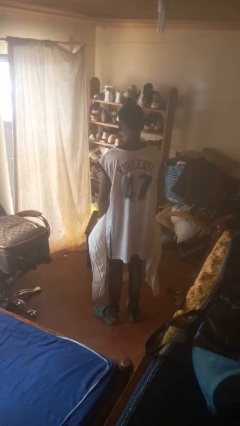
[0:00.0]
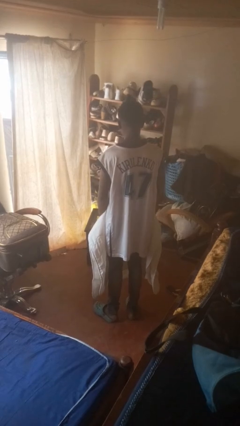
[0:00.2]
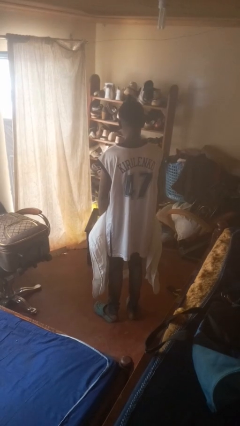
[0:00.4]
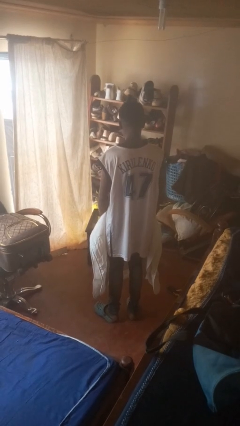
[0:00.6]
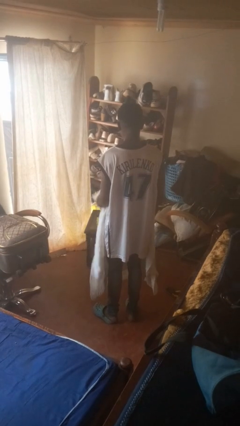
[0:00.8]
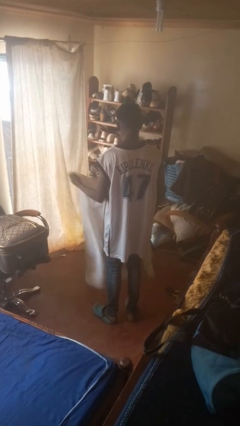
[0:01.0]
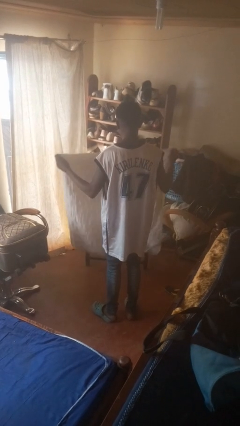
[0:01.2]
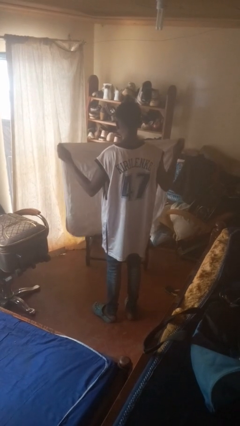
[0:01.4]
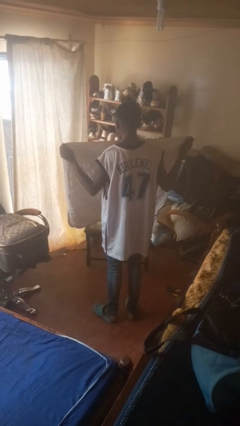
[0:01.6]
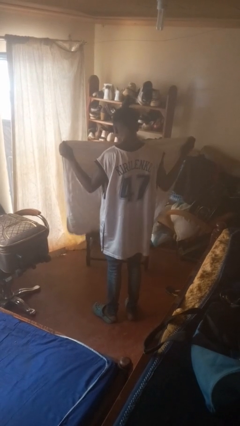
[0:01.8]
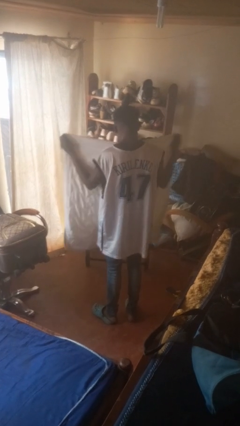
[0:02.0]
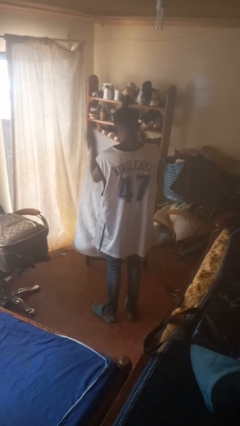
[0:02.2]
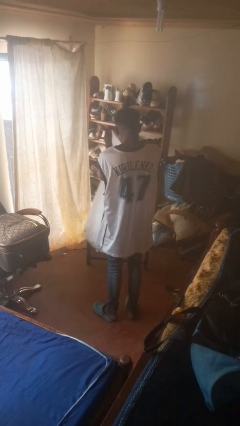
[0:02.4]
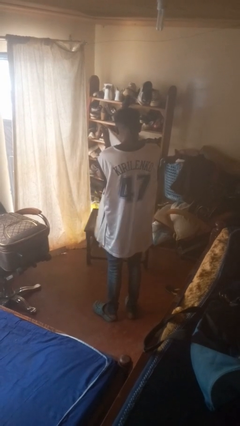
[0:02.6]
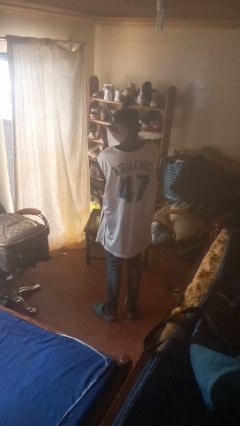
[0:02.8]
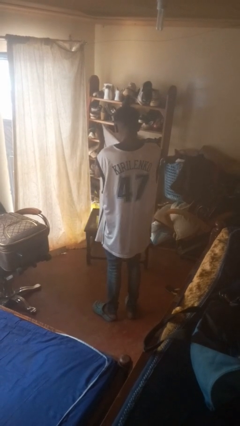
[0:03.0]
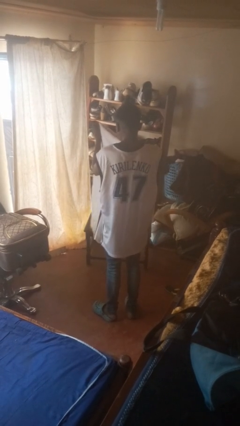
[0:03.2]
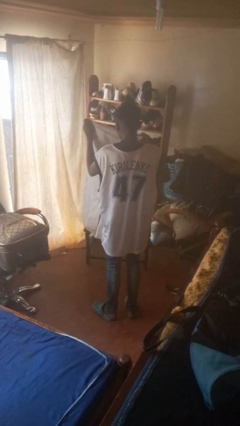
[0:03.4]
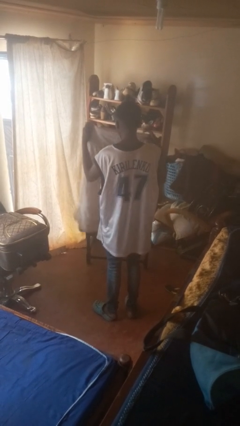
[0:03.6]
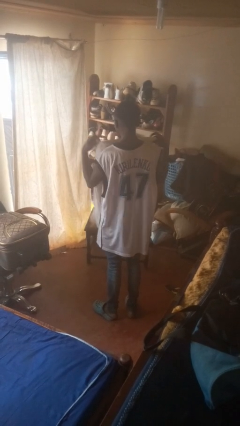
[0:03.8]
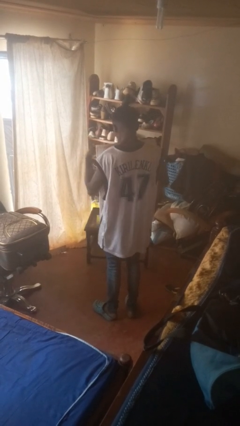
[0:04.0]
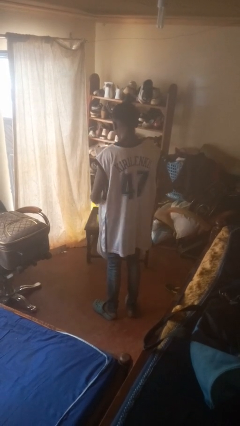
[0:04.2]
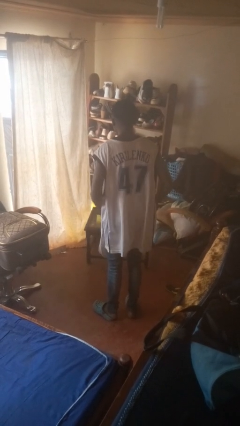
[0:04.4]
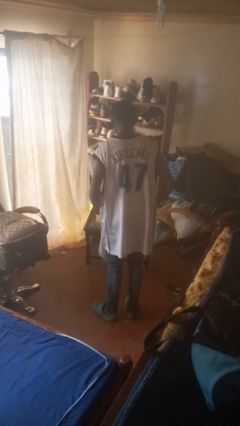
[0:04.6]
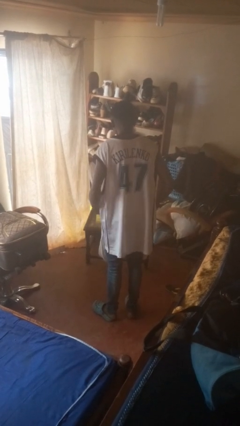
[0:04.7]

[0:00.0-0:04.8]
person folds blanket

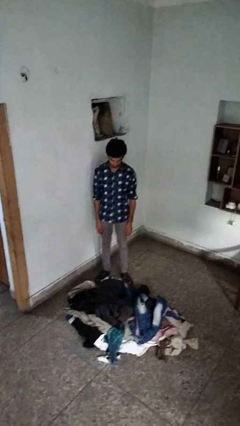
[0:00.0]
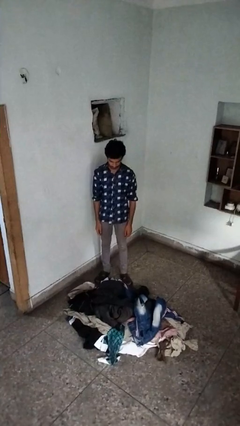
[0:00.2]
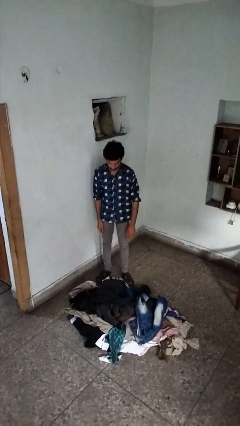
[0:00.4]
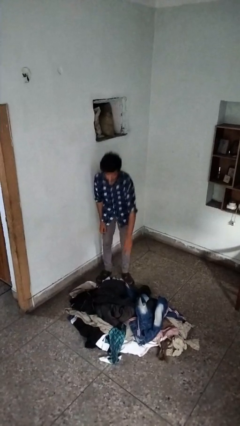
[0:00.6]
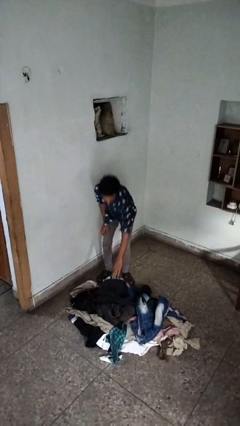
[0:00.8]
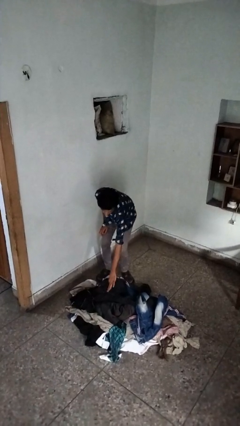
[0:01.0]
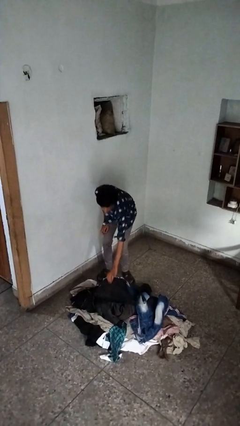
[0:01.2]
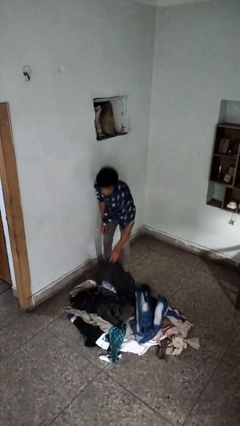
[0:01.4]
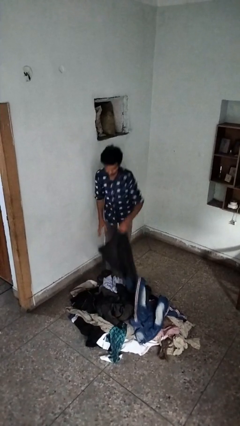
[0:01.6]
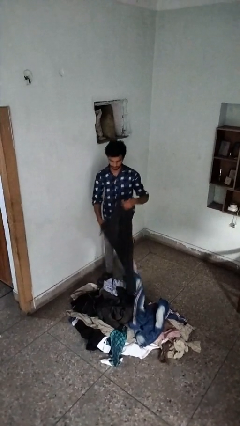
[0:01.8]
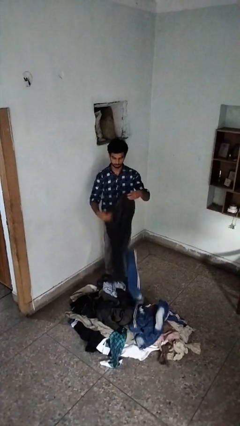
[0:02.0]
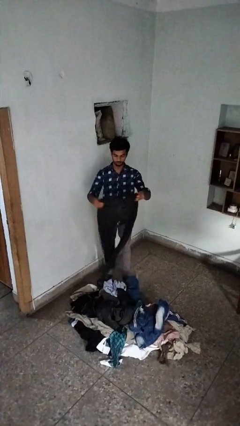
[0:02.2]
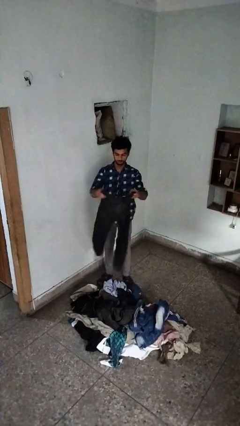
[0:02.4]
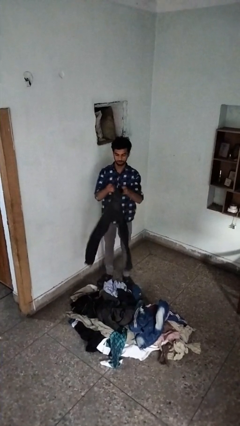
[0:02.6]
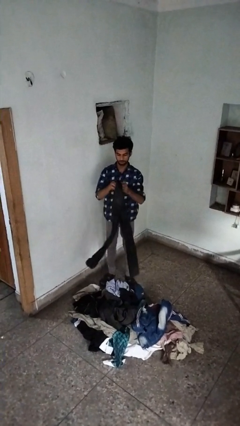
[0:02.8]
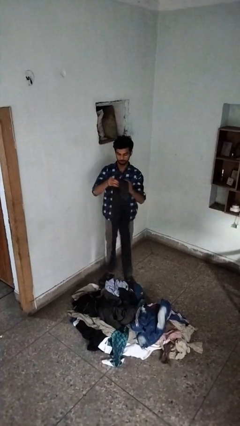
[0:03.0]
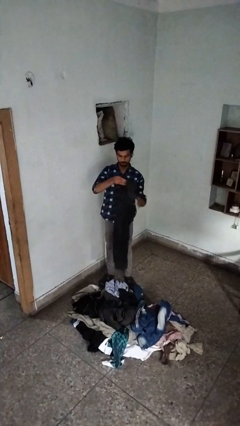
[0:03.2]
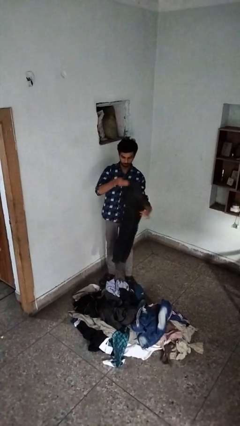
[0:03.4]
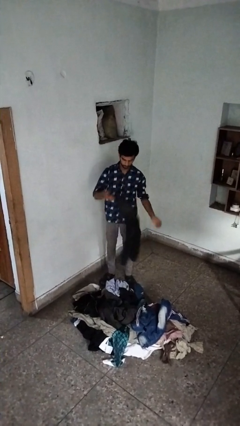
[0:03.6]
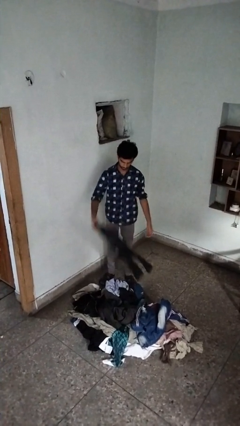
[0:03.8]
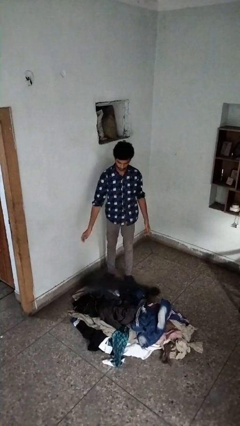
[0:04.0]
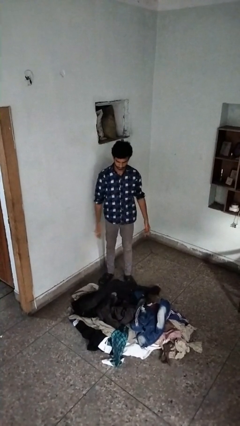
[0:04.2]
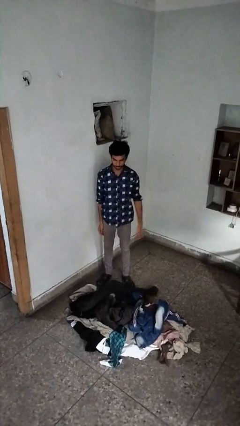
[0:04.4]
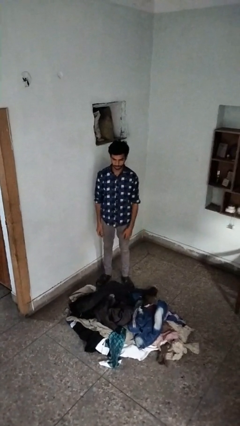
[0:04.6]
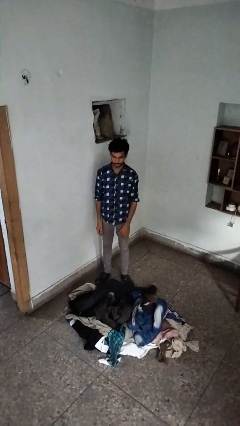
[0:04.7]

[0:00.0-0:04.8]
person folds pants

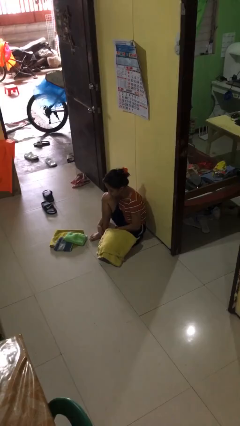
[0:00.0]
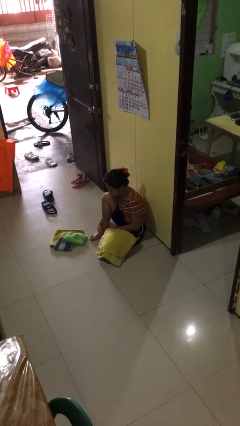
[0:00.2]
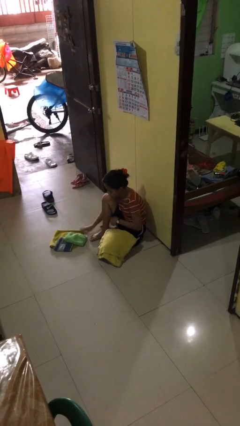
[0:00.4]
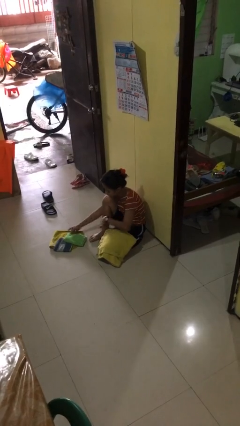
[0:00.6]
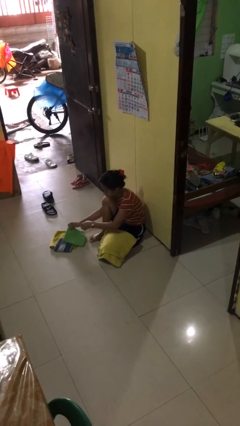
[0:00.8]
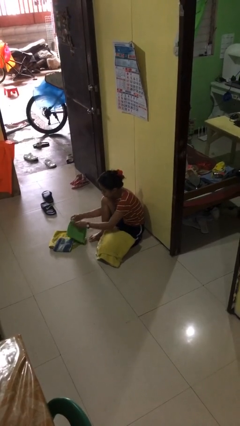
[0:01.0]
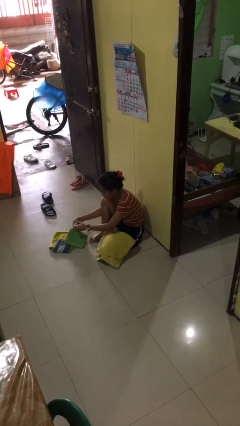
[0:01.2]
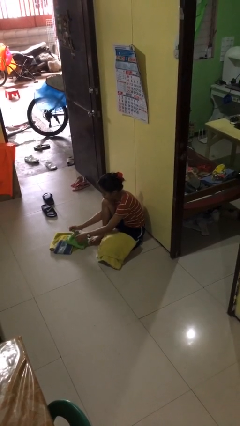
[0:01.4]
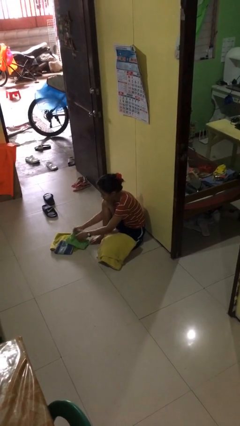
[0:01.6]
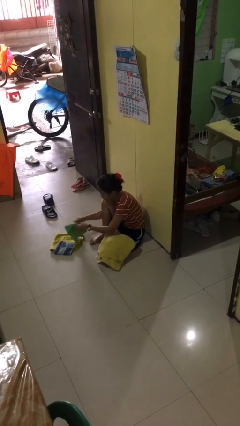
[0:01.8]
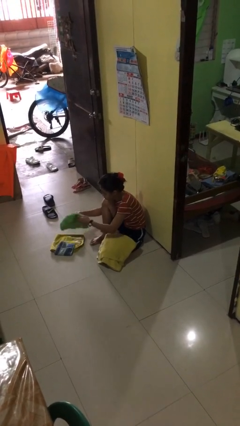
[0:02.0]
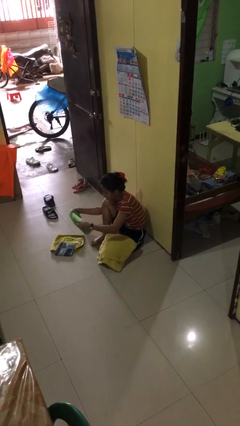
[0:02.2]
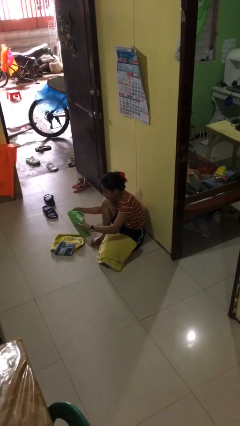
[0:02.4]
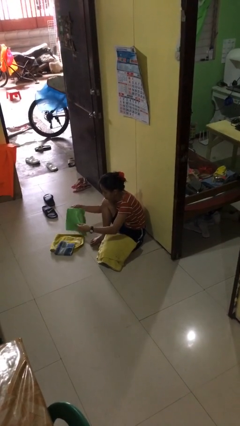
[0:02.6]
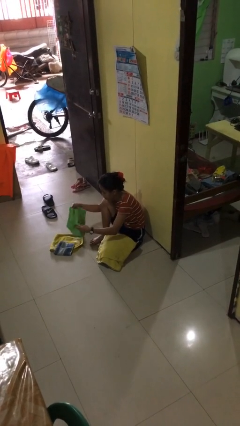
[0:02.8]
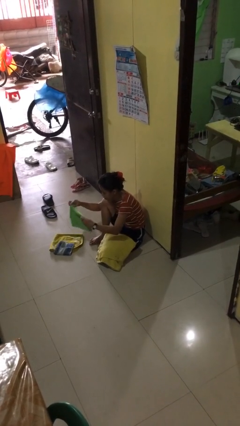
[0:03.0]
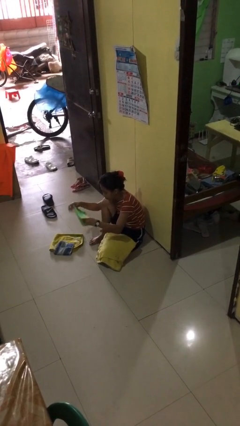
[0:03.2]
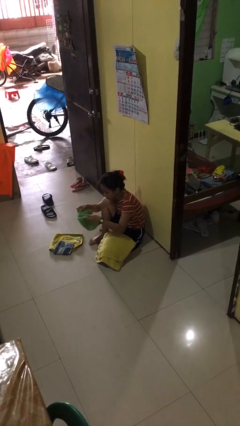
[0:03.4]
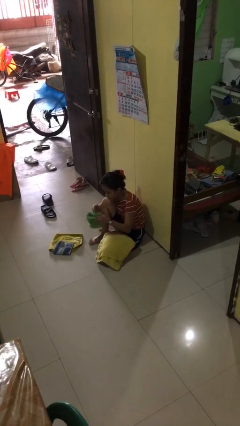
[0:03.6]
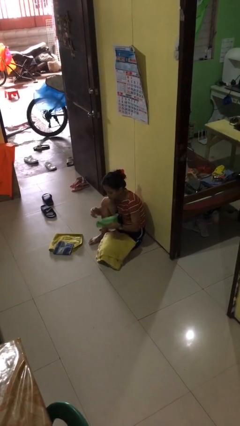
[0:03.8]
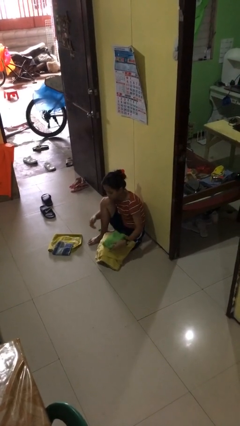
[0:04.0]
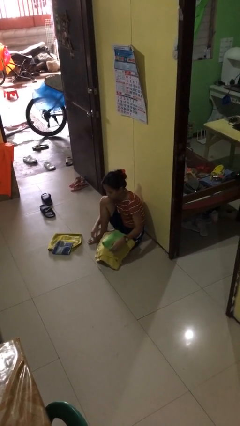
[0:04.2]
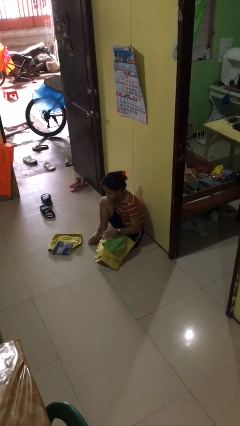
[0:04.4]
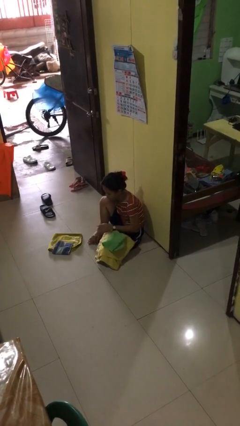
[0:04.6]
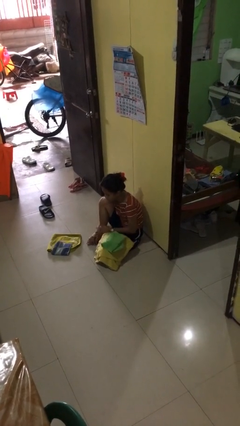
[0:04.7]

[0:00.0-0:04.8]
person folds towel

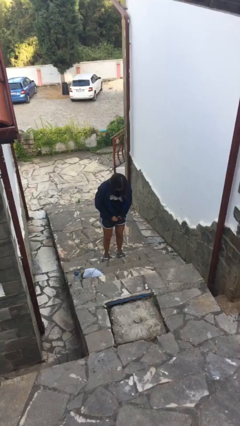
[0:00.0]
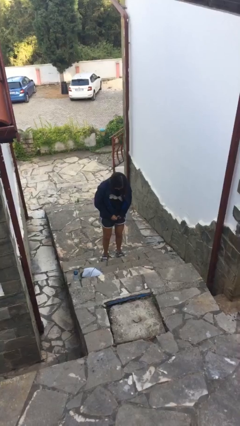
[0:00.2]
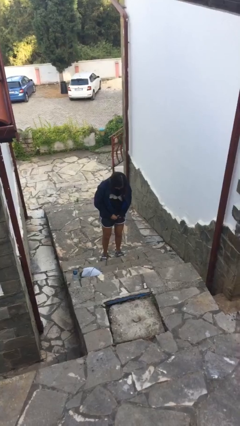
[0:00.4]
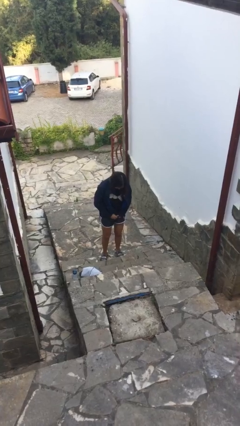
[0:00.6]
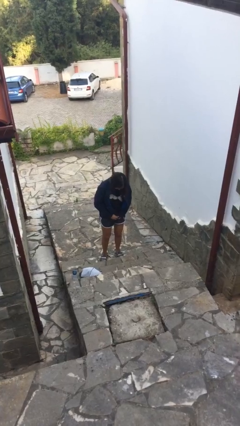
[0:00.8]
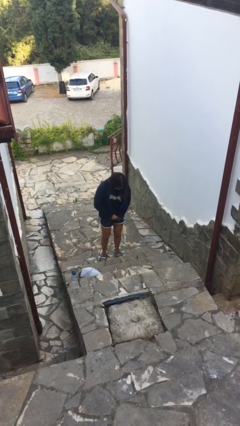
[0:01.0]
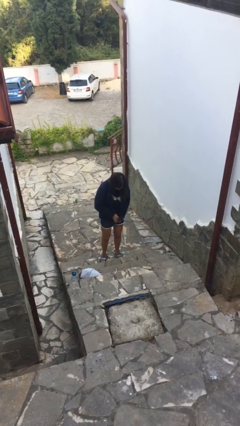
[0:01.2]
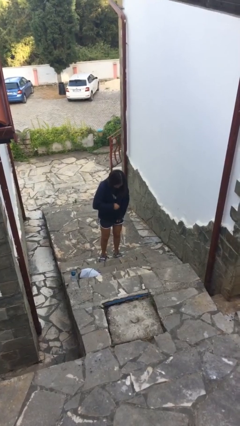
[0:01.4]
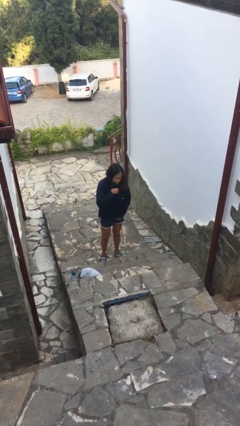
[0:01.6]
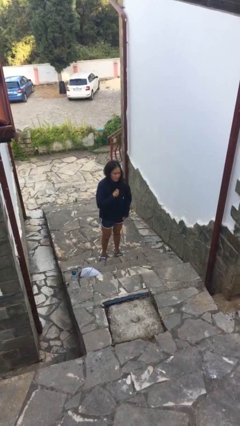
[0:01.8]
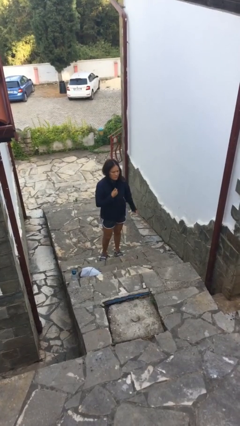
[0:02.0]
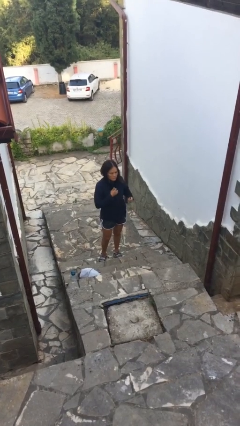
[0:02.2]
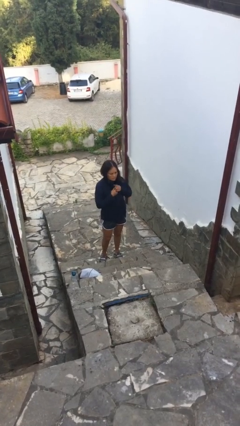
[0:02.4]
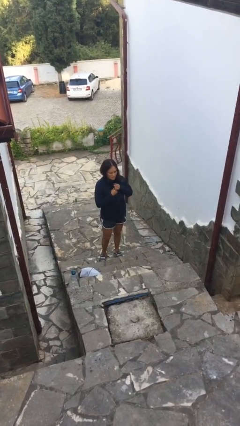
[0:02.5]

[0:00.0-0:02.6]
person zips up jacket

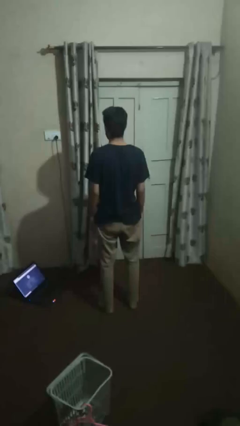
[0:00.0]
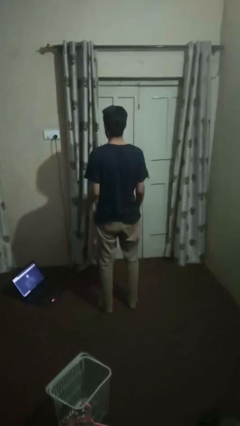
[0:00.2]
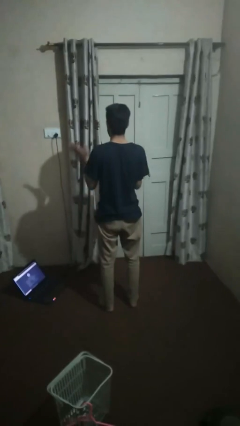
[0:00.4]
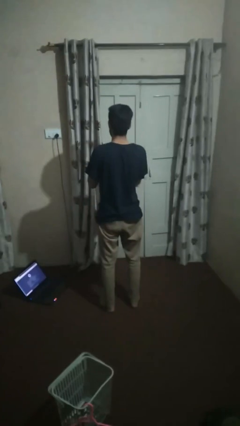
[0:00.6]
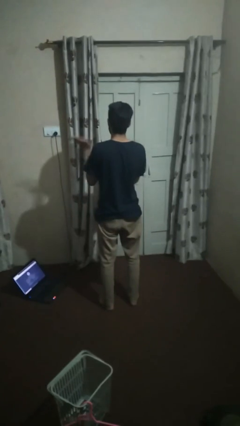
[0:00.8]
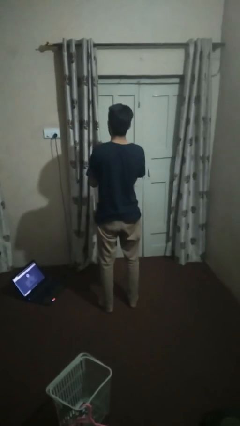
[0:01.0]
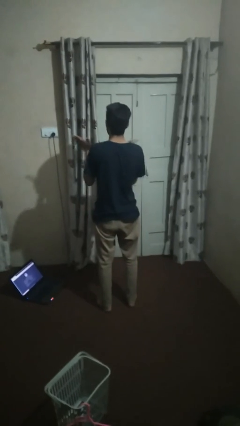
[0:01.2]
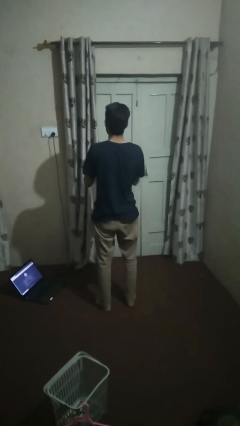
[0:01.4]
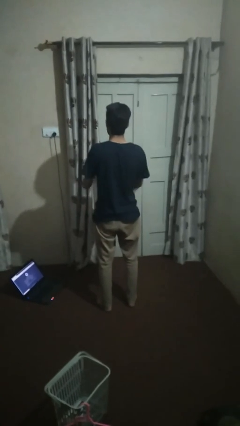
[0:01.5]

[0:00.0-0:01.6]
person claps hands
